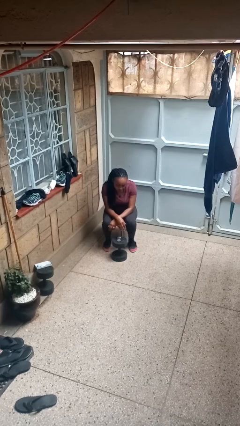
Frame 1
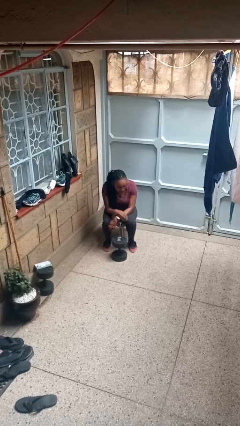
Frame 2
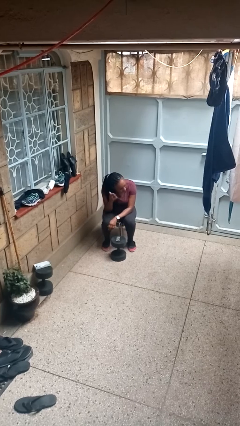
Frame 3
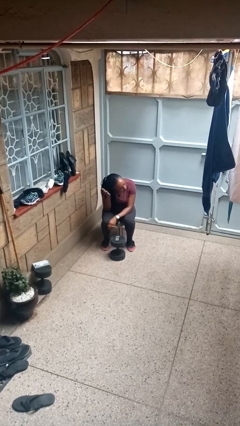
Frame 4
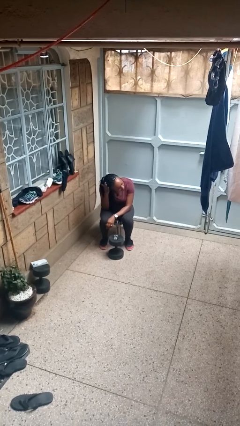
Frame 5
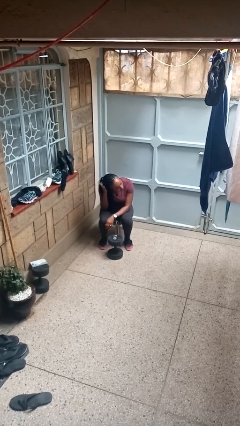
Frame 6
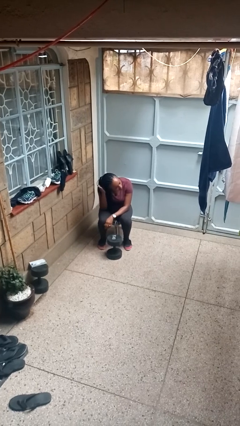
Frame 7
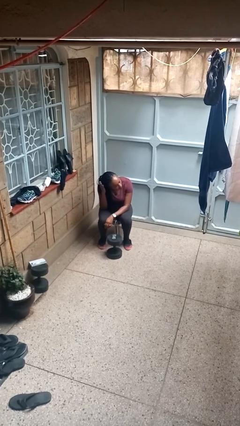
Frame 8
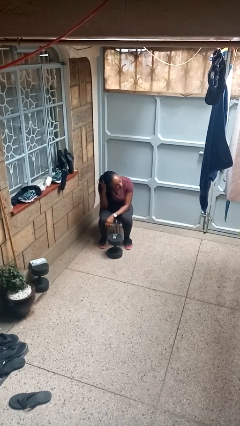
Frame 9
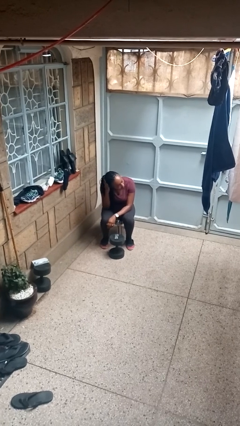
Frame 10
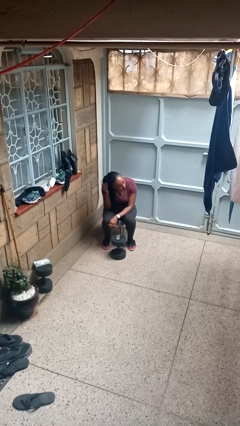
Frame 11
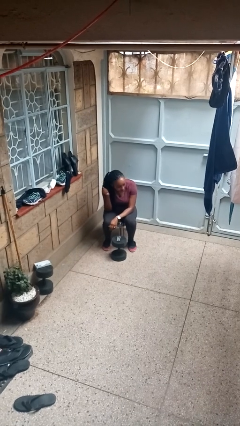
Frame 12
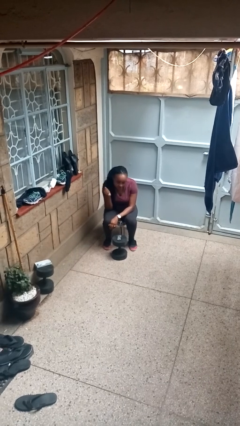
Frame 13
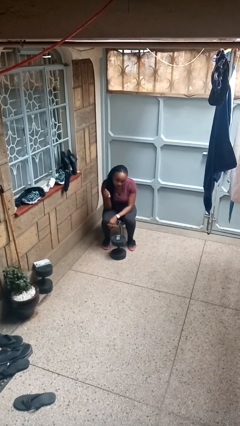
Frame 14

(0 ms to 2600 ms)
person pats head

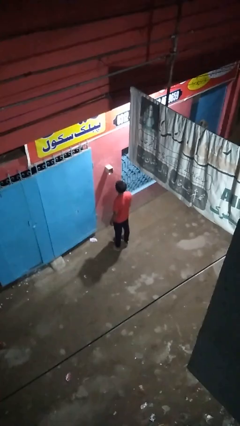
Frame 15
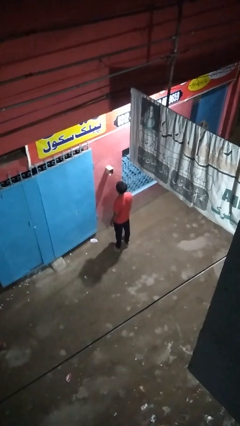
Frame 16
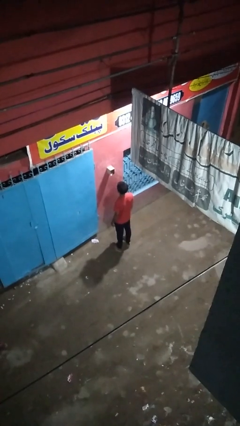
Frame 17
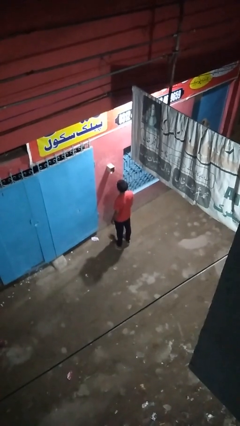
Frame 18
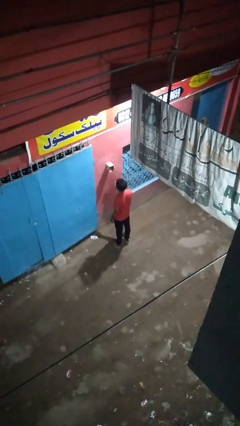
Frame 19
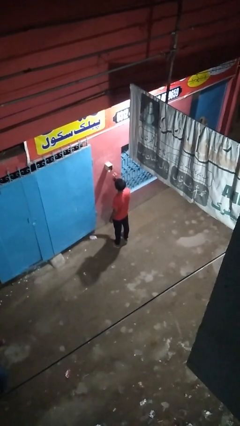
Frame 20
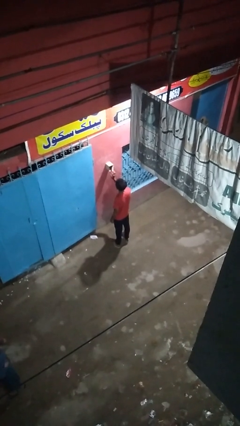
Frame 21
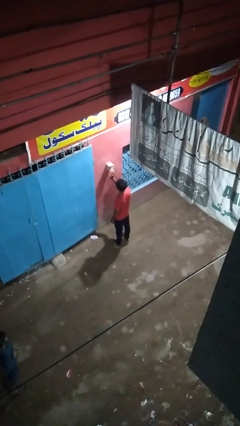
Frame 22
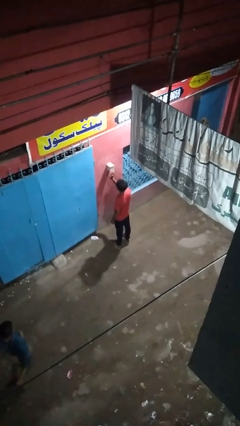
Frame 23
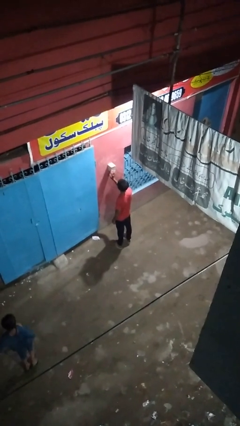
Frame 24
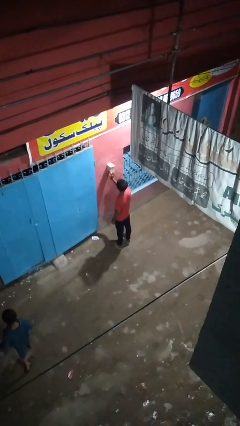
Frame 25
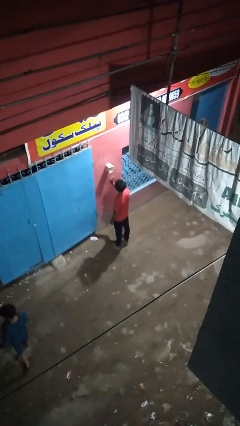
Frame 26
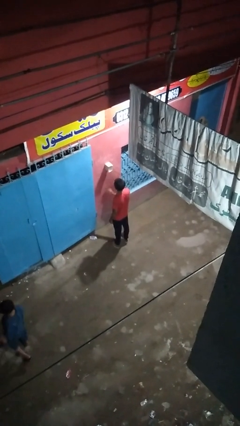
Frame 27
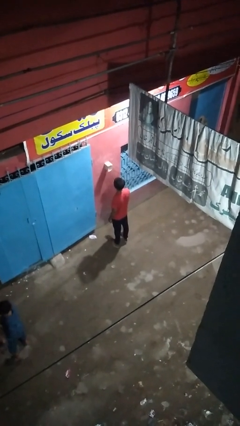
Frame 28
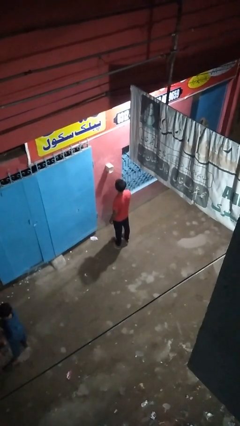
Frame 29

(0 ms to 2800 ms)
person closes mailbox

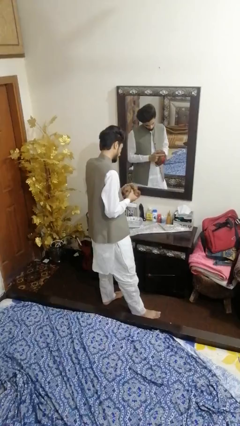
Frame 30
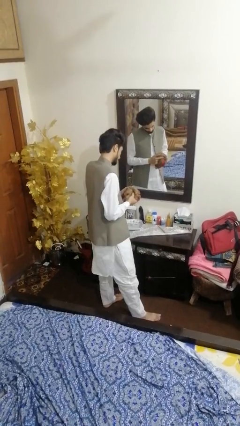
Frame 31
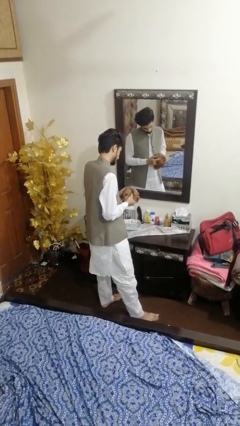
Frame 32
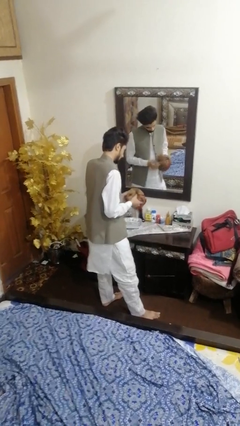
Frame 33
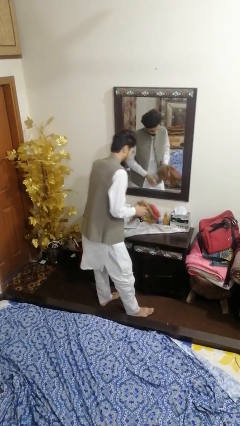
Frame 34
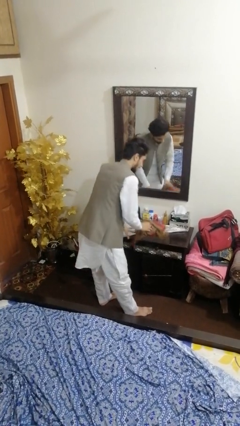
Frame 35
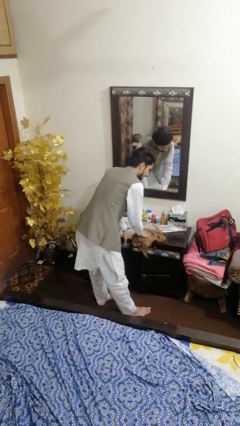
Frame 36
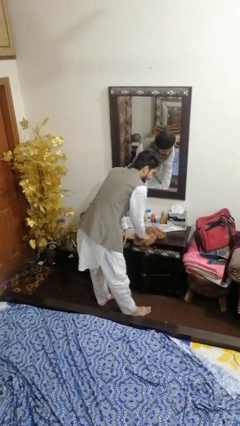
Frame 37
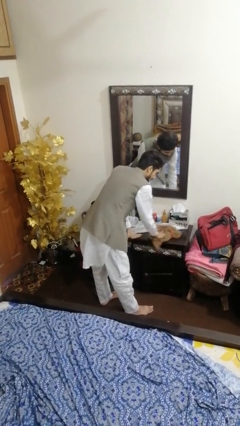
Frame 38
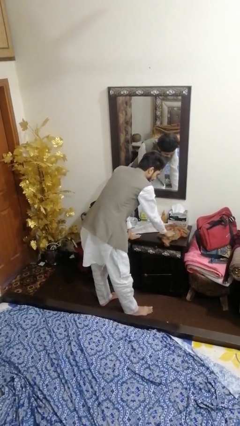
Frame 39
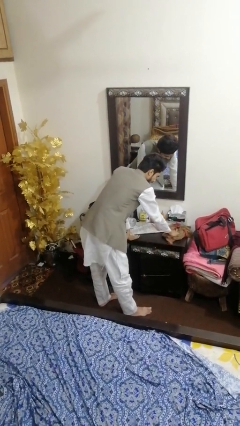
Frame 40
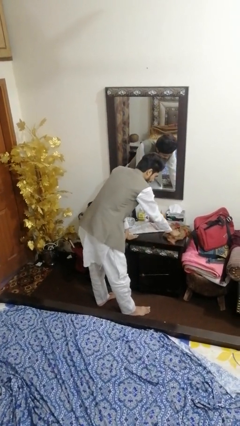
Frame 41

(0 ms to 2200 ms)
person cleans table with rag

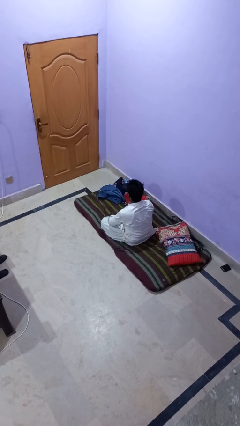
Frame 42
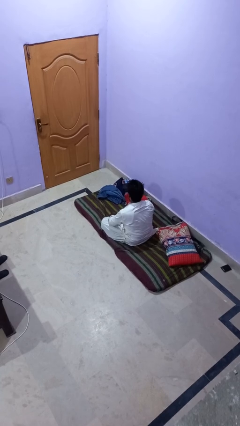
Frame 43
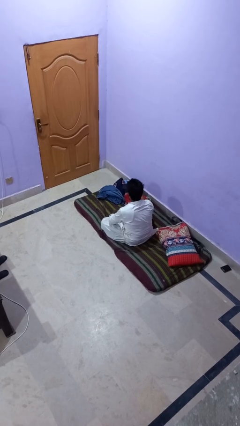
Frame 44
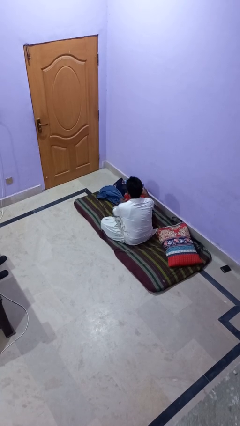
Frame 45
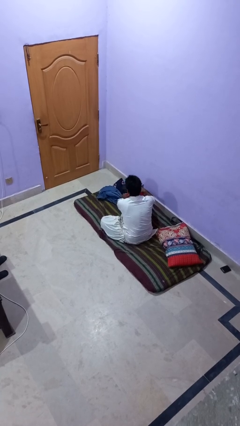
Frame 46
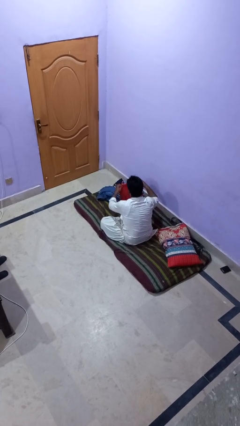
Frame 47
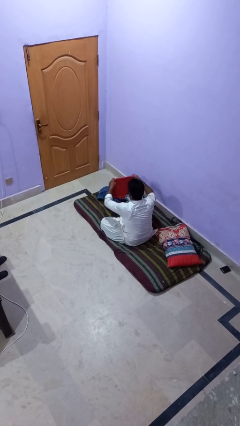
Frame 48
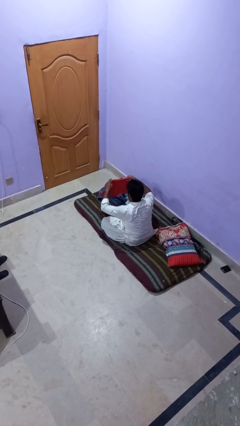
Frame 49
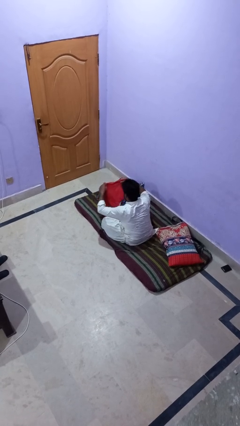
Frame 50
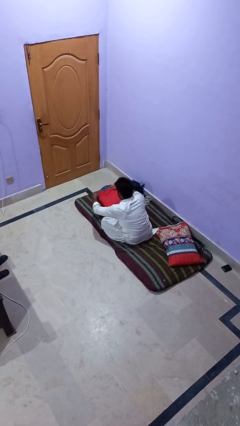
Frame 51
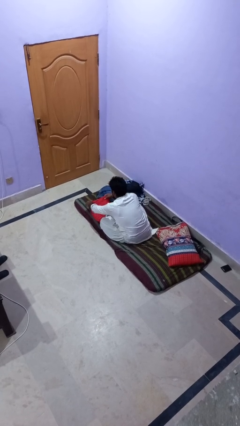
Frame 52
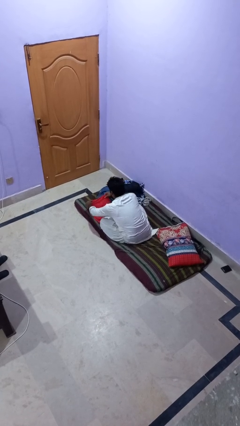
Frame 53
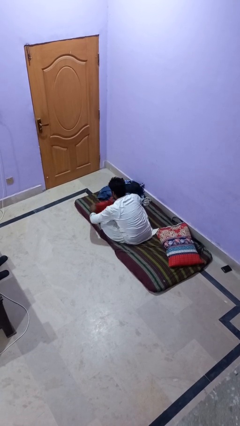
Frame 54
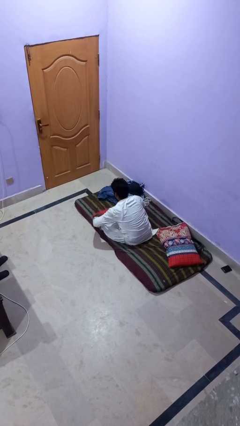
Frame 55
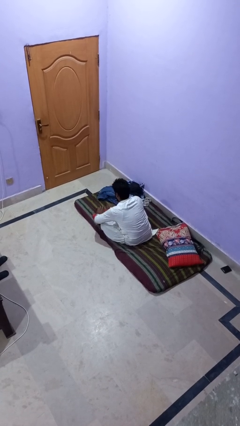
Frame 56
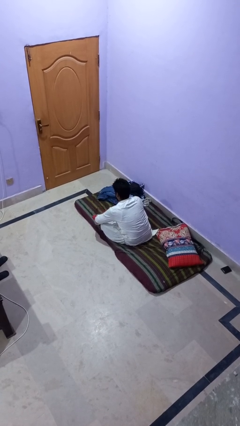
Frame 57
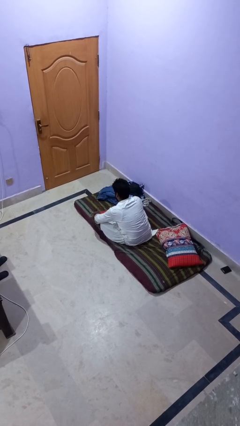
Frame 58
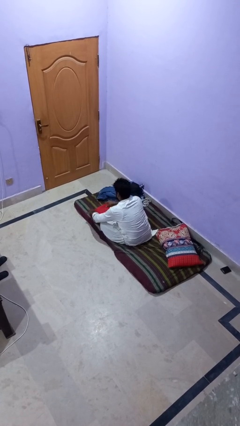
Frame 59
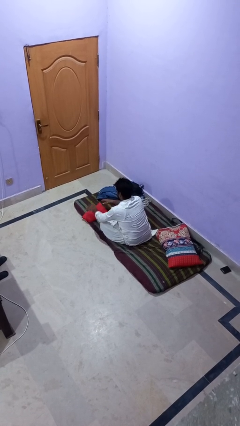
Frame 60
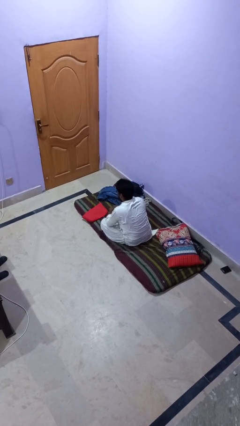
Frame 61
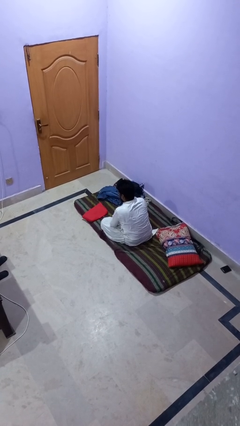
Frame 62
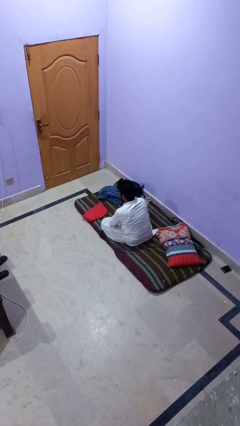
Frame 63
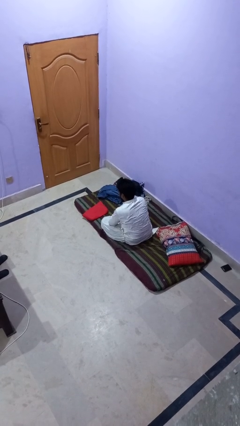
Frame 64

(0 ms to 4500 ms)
person folds shirt

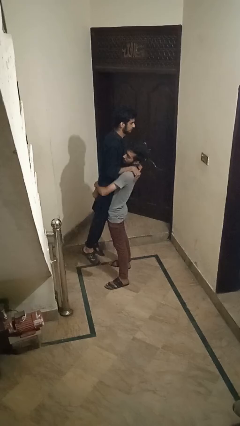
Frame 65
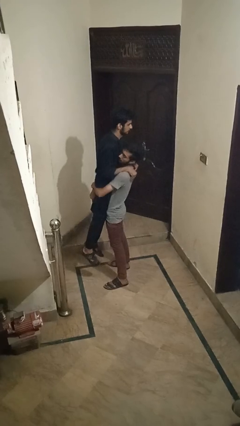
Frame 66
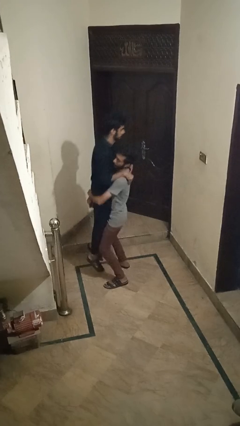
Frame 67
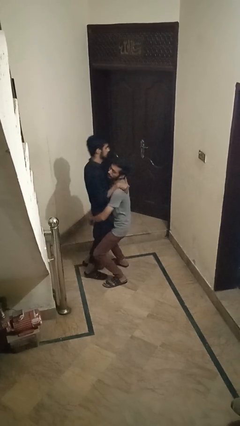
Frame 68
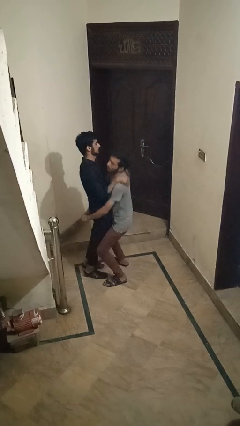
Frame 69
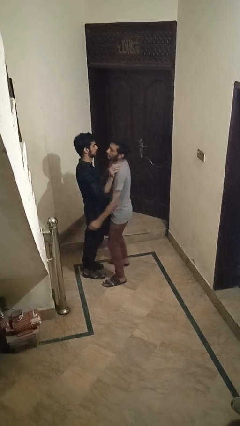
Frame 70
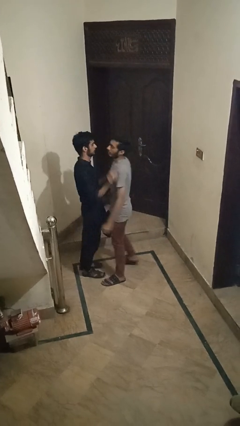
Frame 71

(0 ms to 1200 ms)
person puts down person

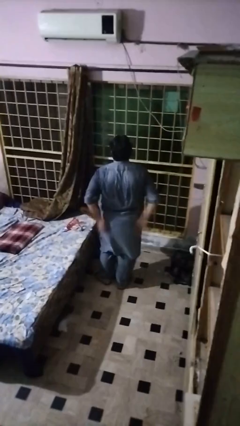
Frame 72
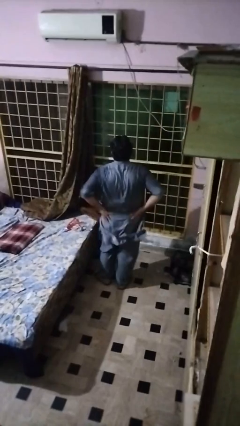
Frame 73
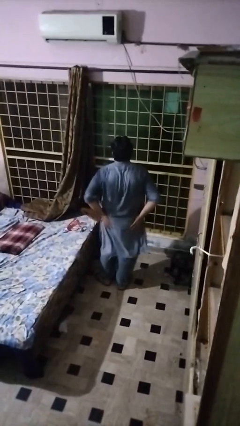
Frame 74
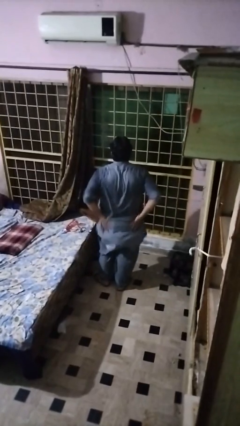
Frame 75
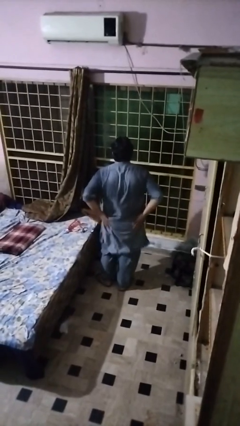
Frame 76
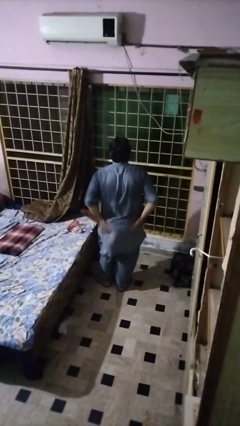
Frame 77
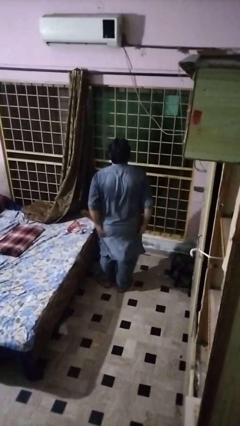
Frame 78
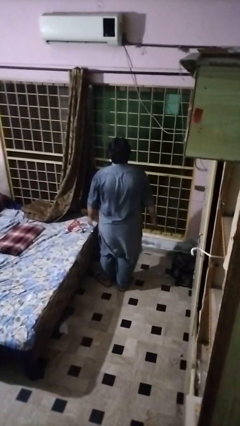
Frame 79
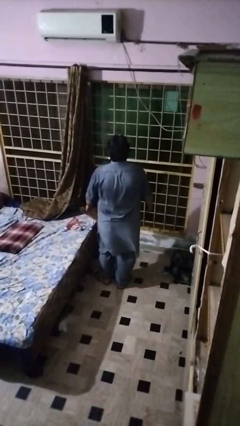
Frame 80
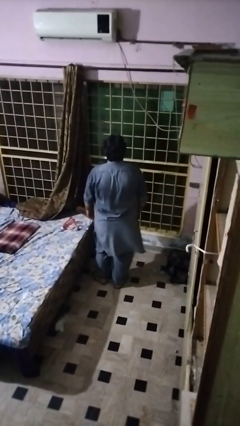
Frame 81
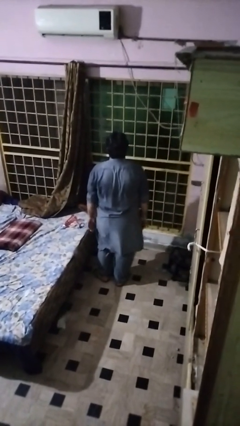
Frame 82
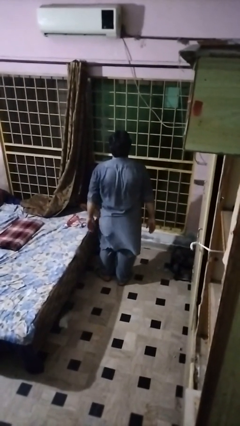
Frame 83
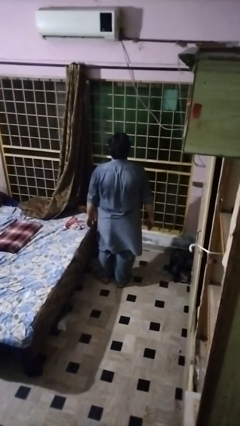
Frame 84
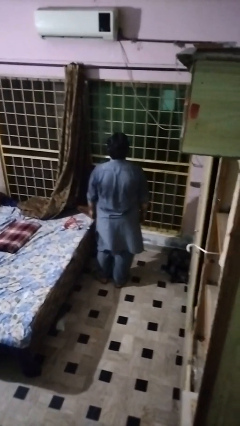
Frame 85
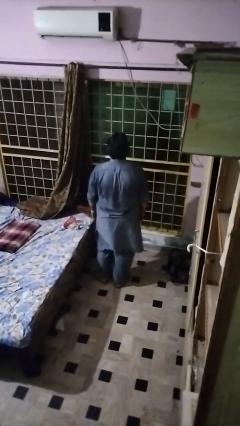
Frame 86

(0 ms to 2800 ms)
person swats bug

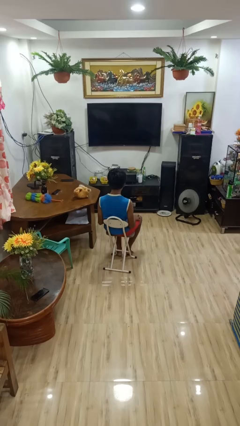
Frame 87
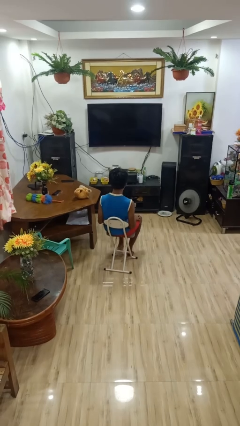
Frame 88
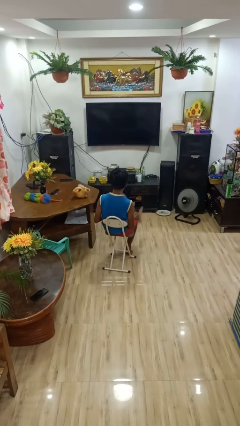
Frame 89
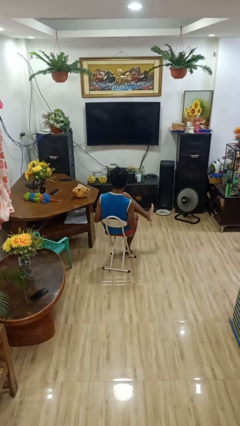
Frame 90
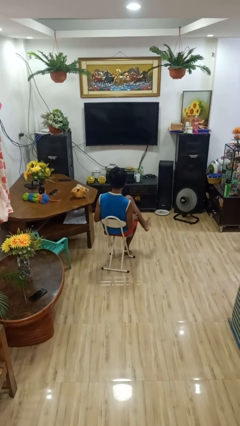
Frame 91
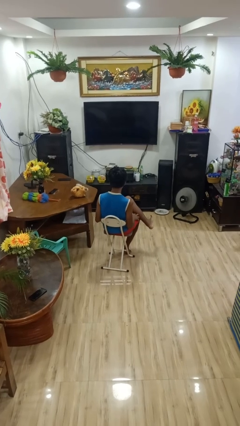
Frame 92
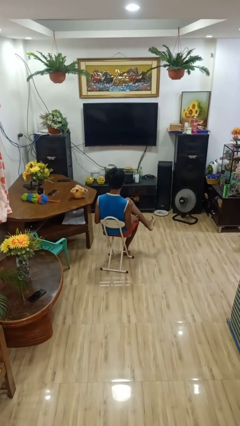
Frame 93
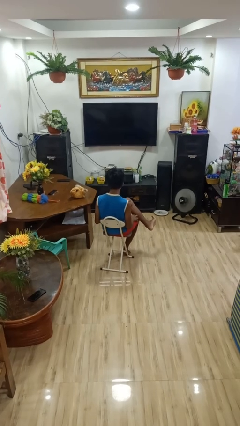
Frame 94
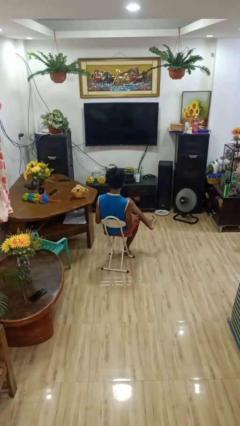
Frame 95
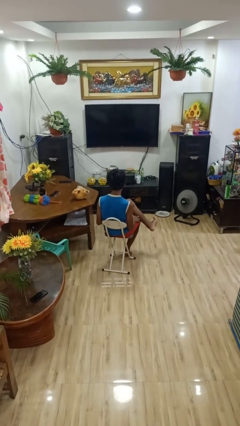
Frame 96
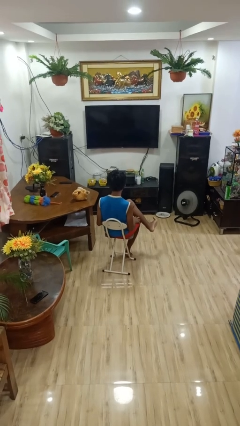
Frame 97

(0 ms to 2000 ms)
person crosses legs
